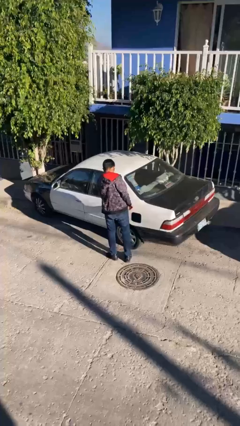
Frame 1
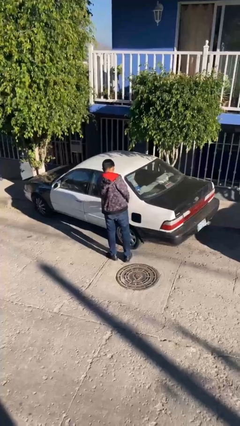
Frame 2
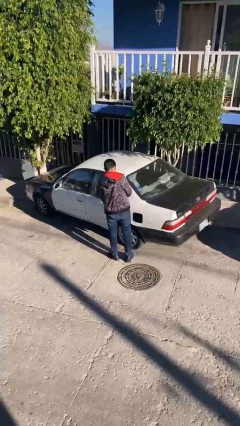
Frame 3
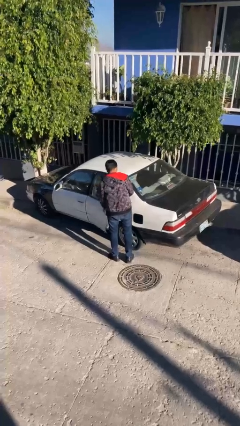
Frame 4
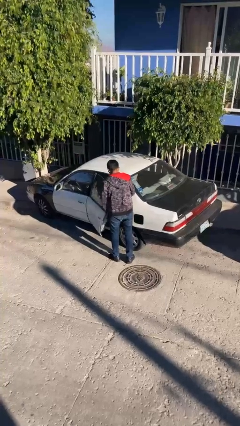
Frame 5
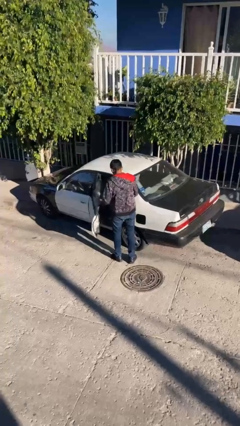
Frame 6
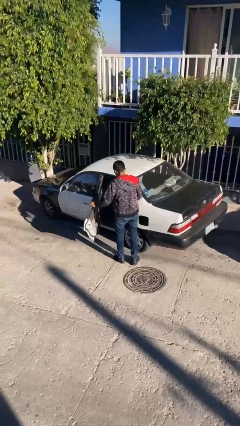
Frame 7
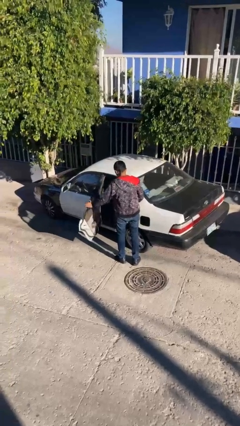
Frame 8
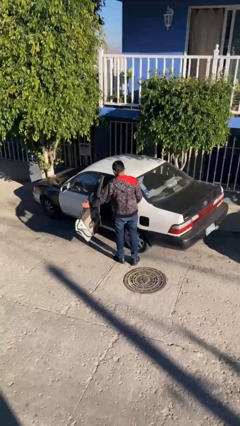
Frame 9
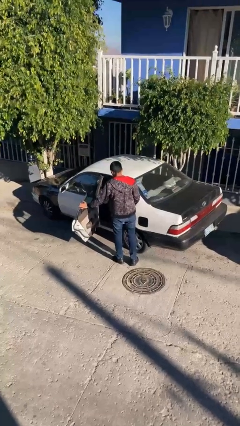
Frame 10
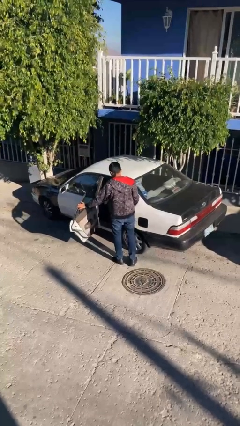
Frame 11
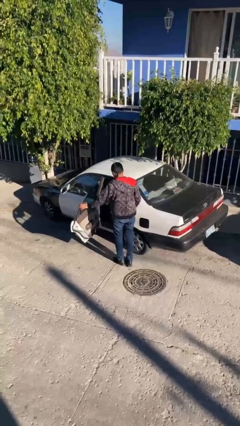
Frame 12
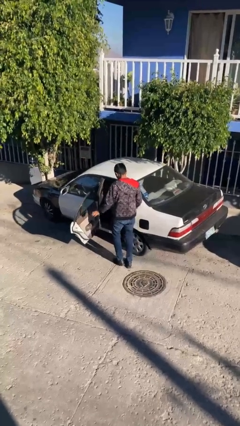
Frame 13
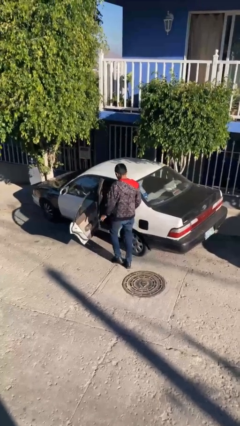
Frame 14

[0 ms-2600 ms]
person opens car door

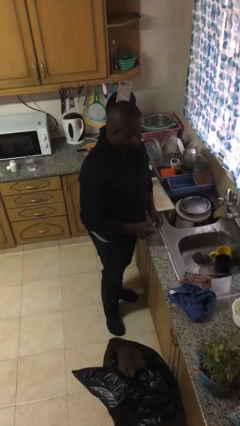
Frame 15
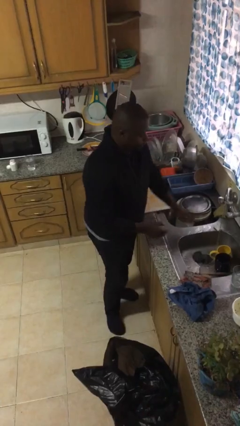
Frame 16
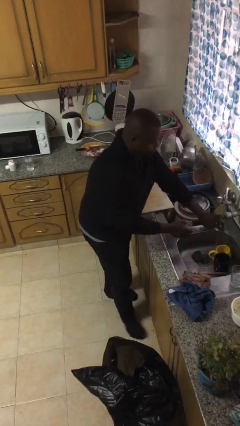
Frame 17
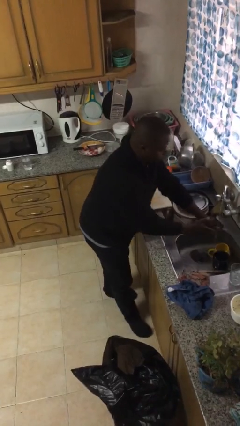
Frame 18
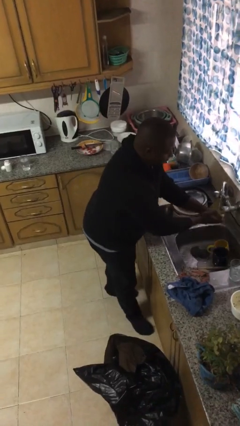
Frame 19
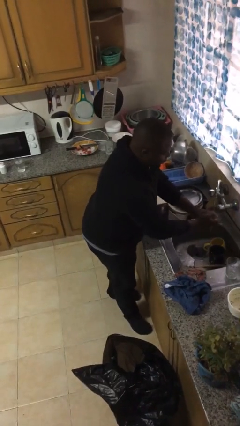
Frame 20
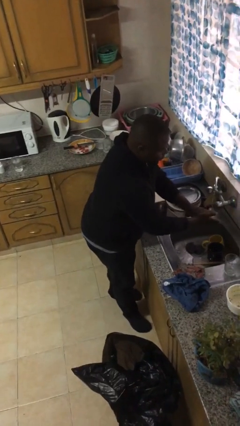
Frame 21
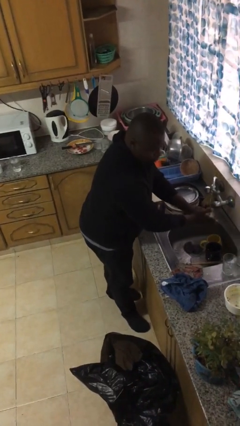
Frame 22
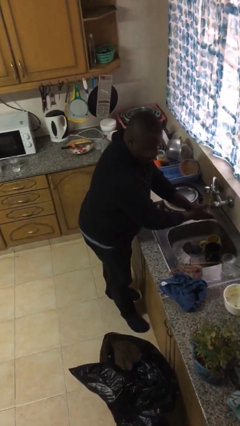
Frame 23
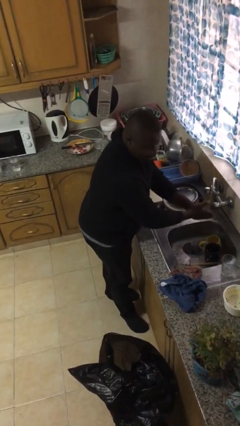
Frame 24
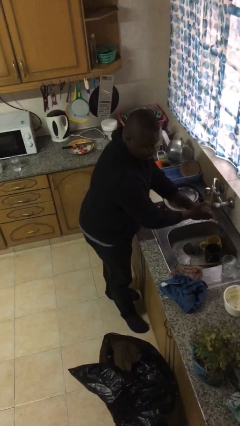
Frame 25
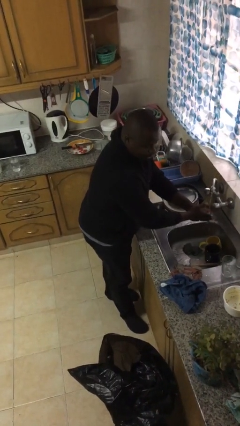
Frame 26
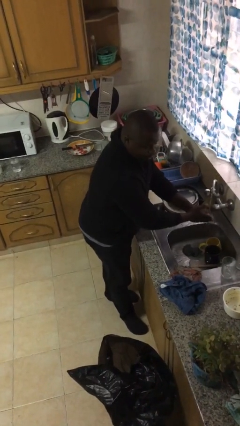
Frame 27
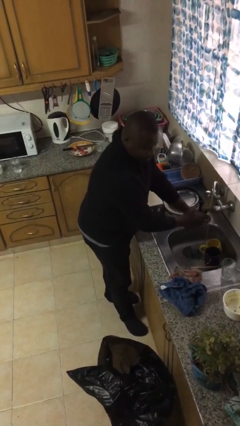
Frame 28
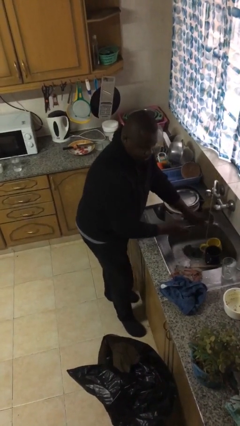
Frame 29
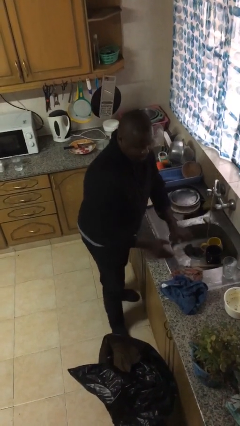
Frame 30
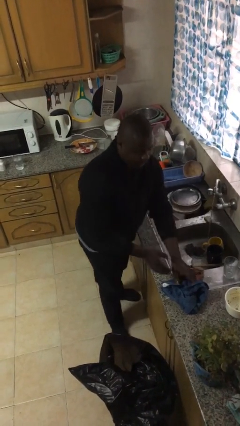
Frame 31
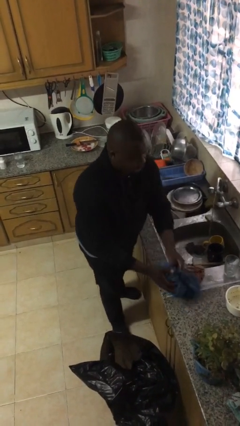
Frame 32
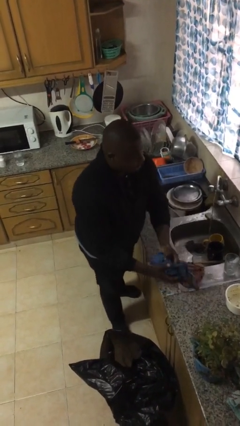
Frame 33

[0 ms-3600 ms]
person washes hands

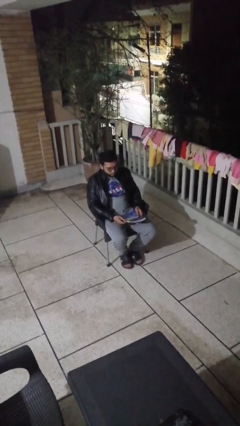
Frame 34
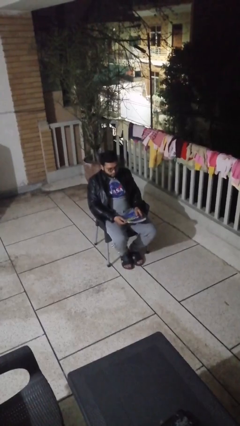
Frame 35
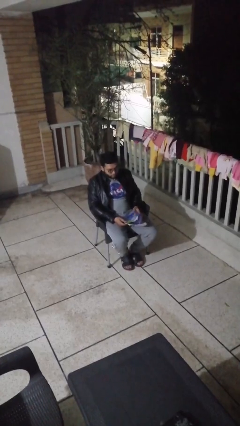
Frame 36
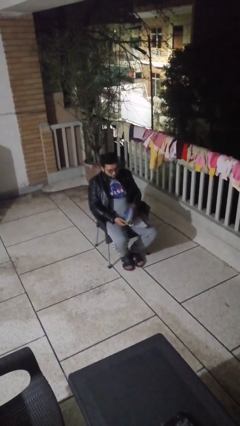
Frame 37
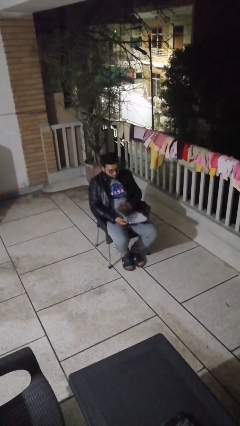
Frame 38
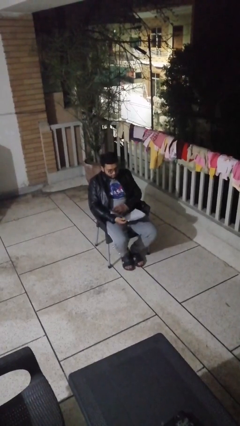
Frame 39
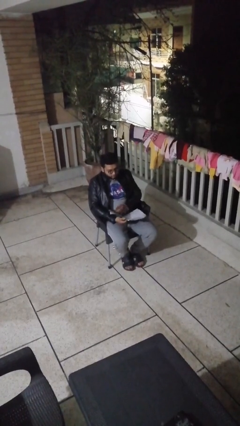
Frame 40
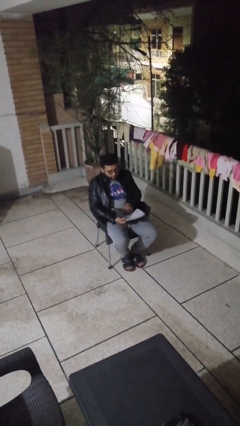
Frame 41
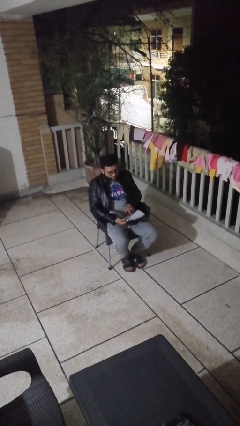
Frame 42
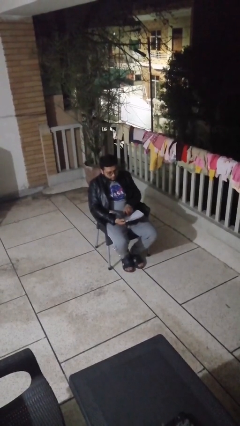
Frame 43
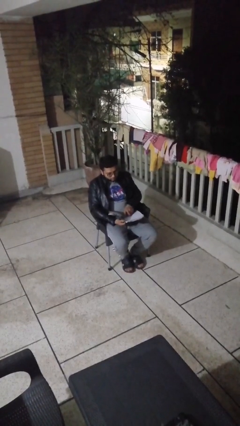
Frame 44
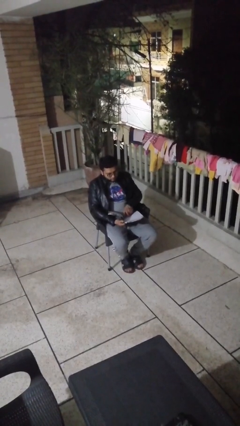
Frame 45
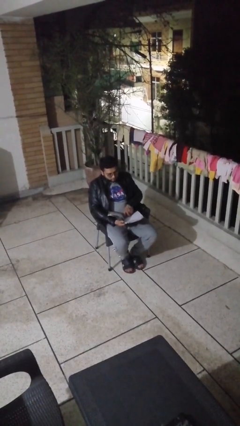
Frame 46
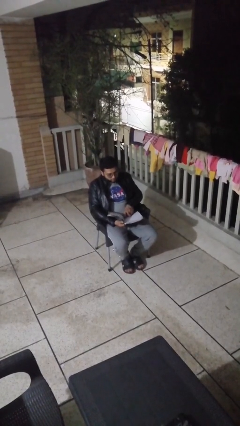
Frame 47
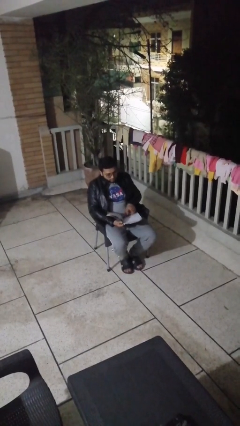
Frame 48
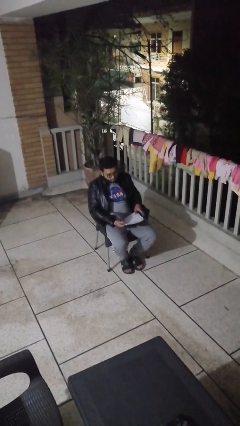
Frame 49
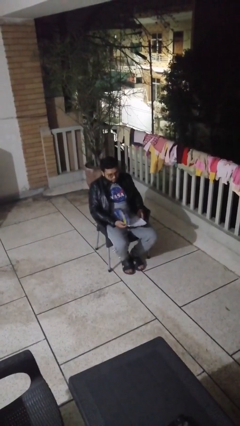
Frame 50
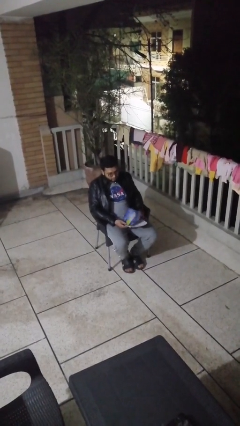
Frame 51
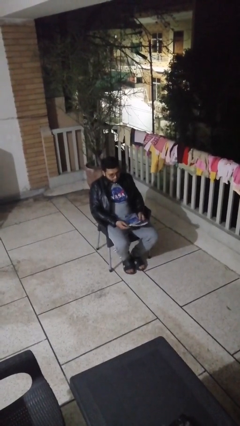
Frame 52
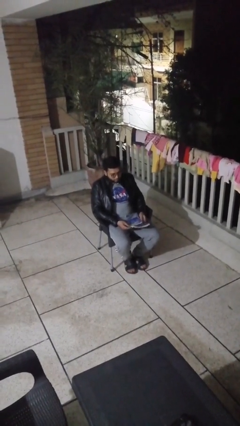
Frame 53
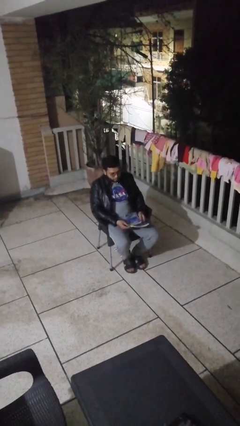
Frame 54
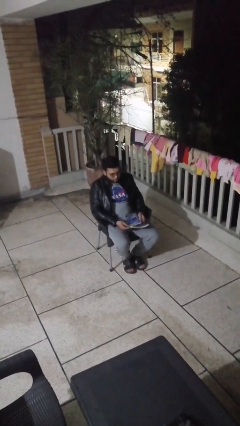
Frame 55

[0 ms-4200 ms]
person reads document

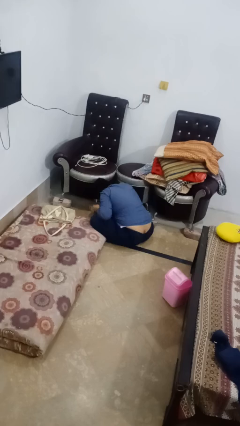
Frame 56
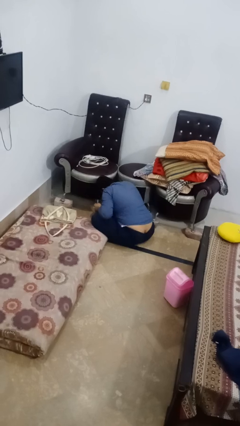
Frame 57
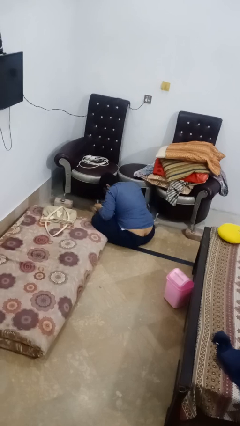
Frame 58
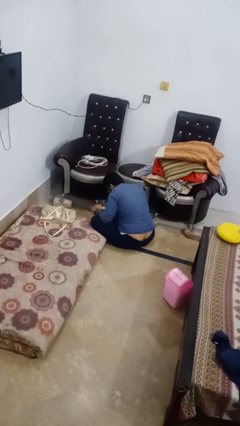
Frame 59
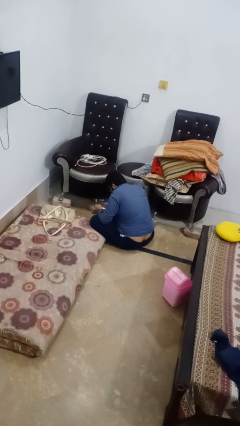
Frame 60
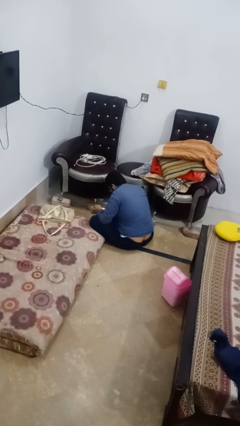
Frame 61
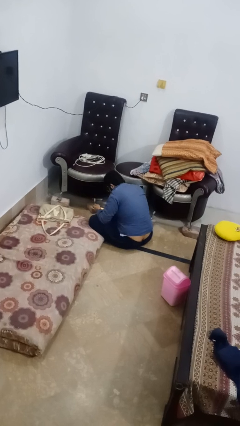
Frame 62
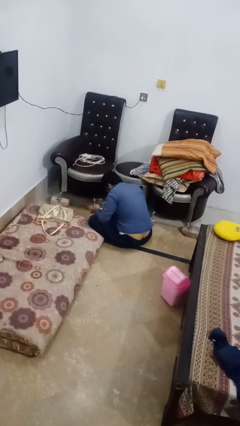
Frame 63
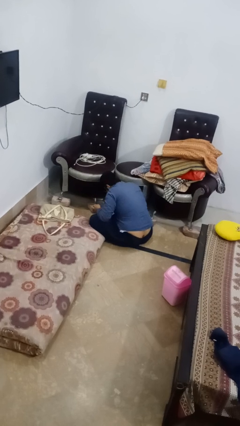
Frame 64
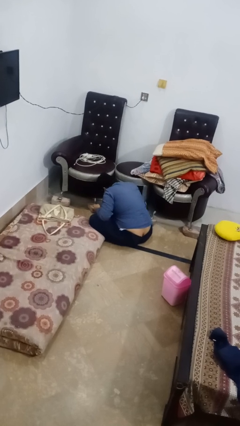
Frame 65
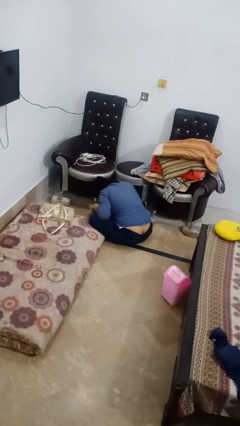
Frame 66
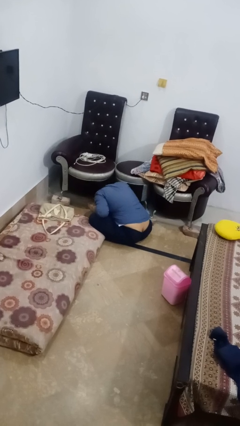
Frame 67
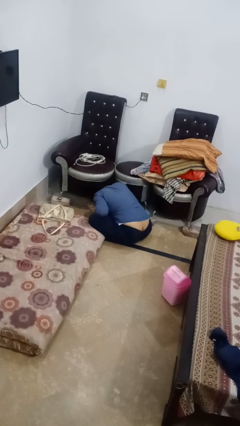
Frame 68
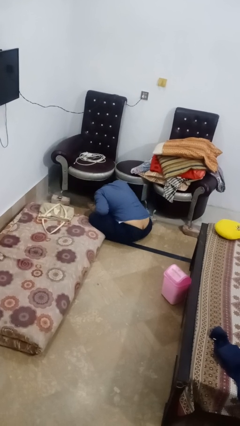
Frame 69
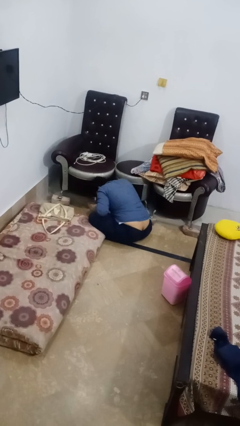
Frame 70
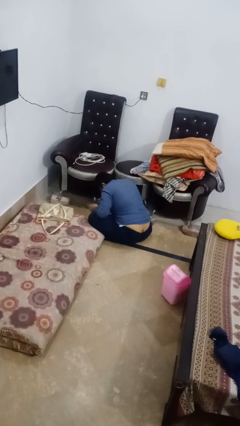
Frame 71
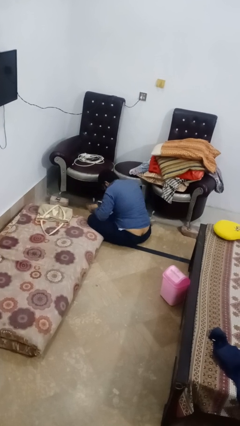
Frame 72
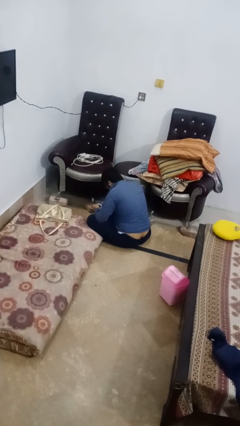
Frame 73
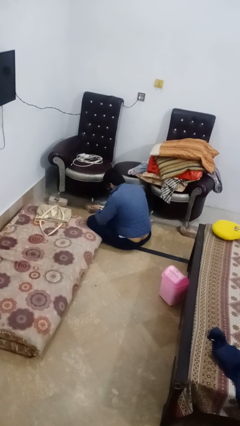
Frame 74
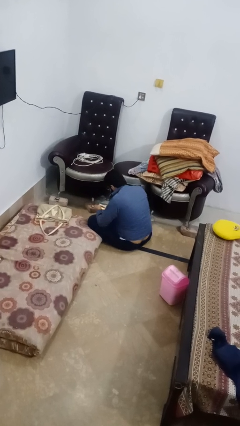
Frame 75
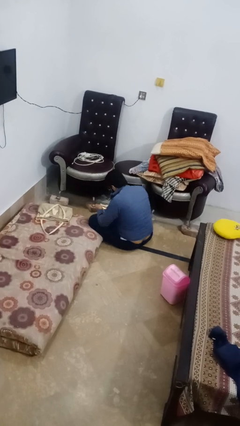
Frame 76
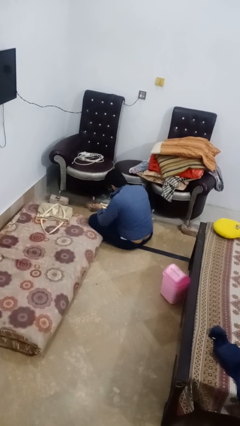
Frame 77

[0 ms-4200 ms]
person searches under couch

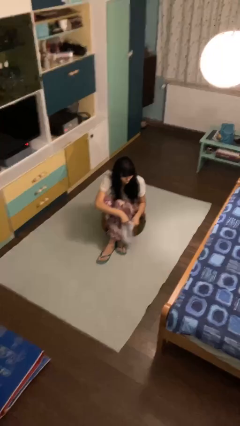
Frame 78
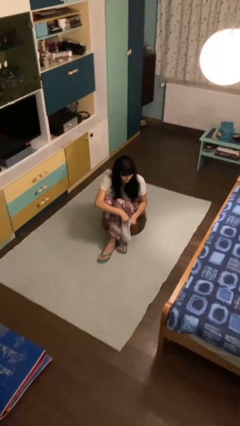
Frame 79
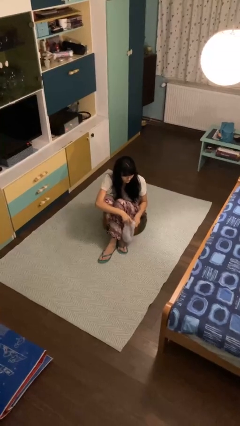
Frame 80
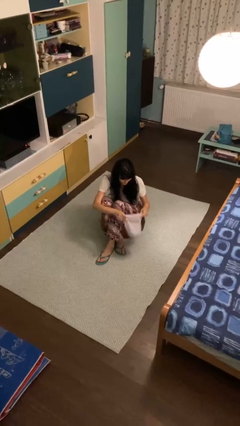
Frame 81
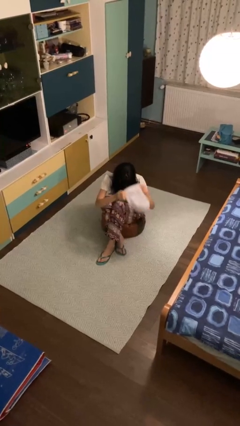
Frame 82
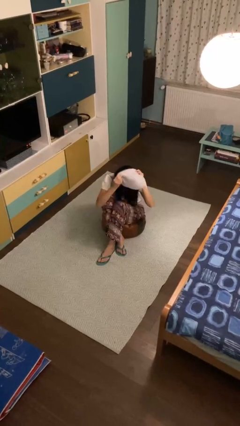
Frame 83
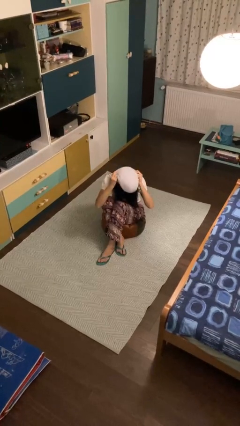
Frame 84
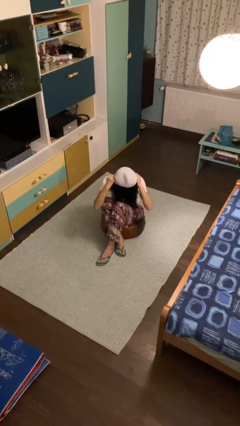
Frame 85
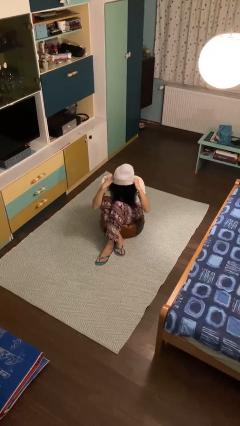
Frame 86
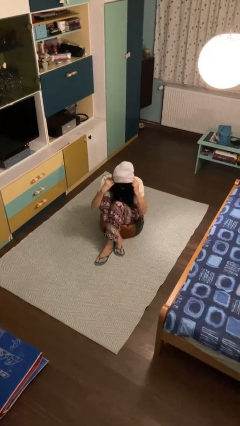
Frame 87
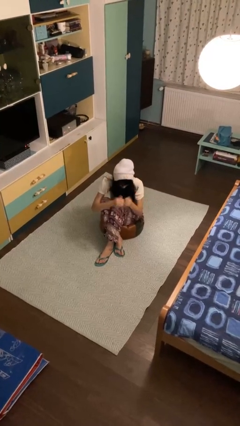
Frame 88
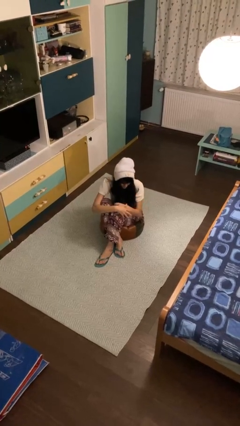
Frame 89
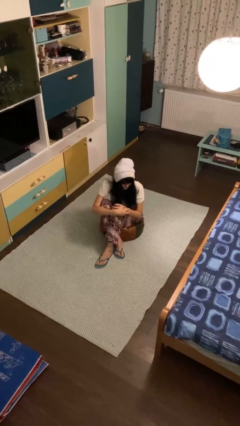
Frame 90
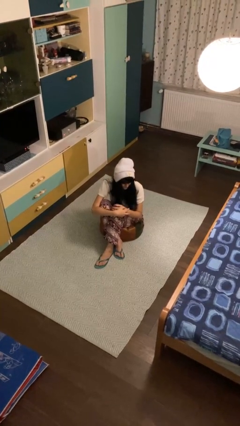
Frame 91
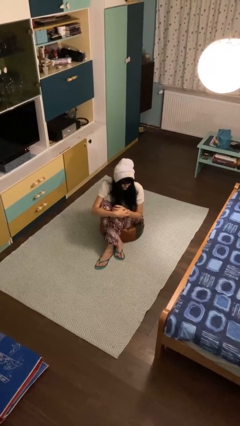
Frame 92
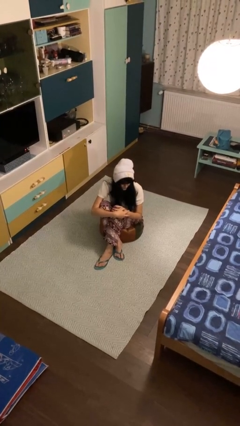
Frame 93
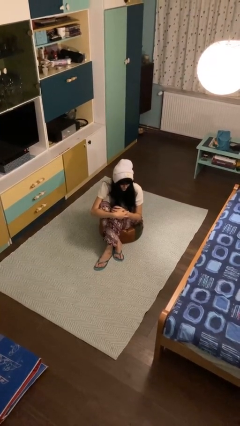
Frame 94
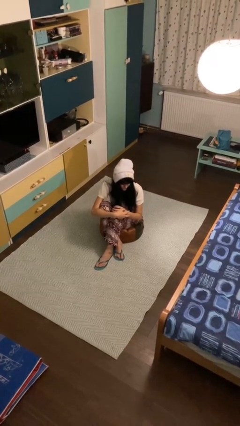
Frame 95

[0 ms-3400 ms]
person puts on hat
